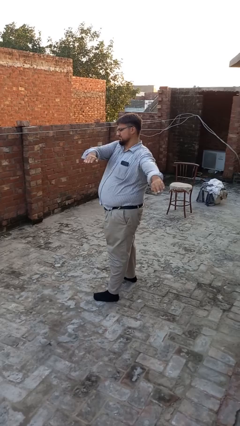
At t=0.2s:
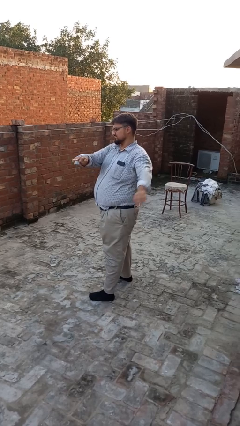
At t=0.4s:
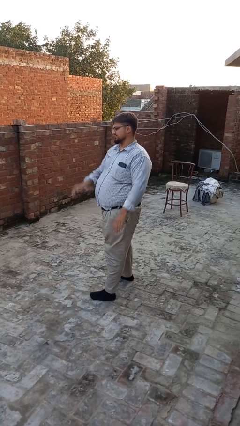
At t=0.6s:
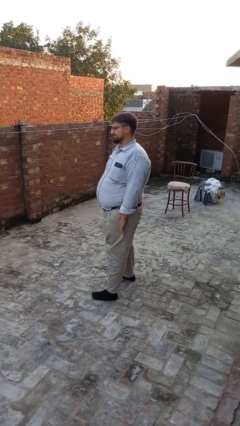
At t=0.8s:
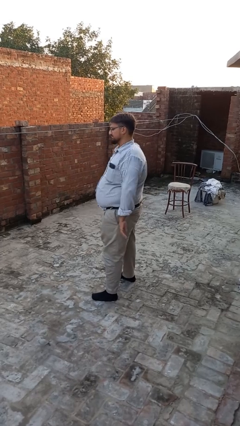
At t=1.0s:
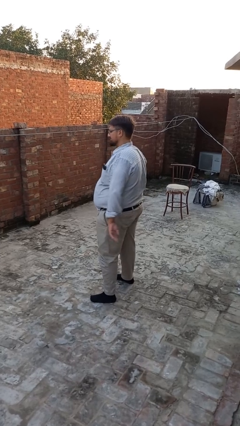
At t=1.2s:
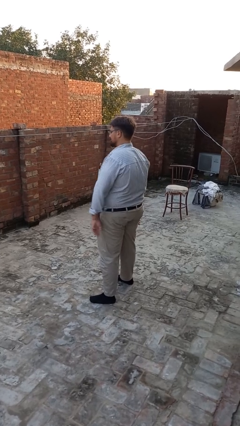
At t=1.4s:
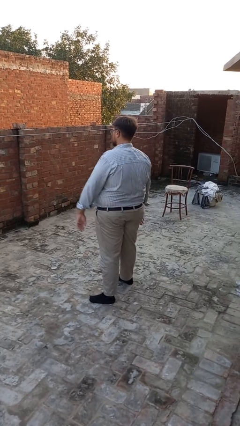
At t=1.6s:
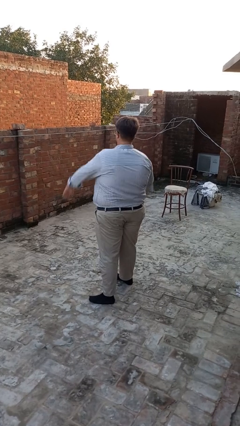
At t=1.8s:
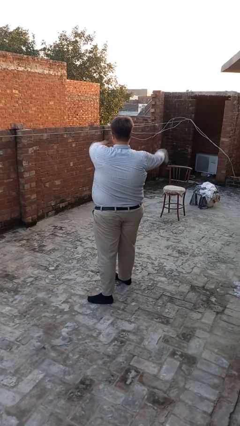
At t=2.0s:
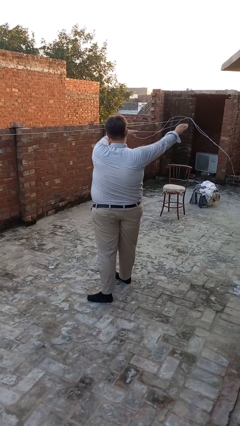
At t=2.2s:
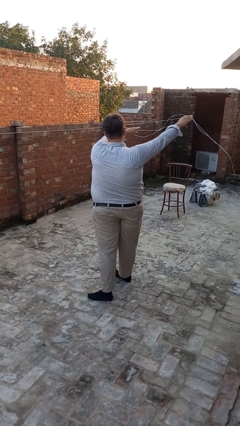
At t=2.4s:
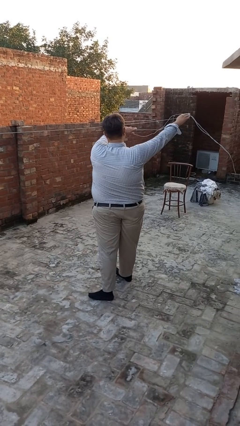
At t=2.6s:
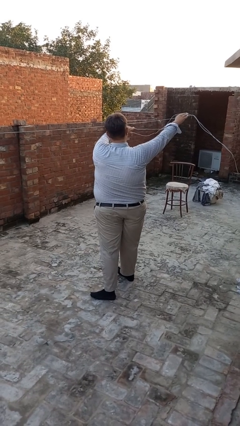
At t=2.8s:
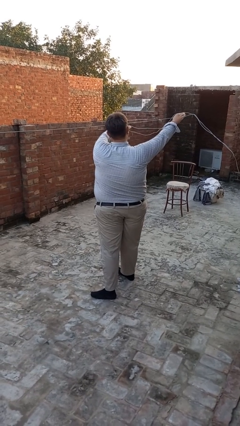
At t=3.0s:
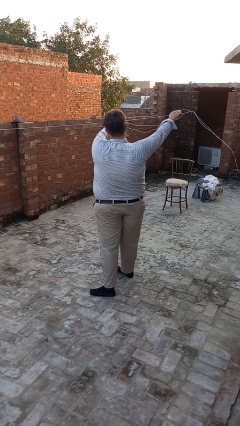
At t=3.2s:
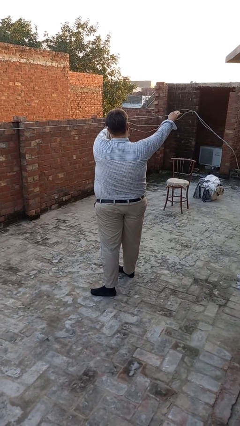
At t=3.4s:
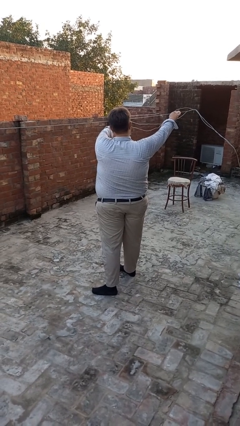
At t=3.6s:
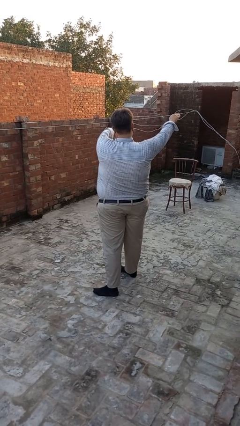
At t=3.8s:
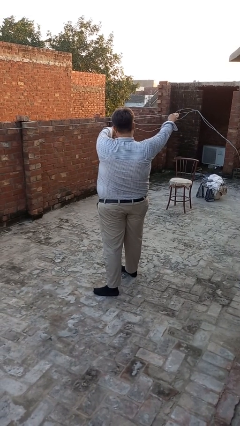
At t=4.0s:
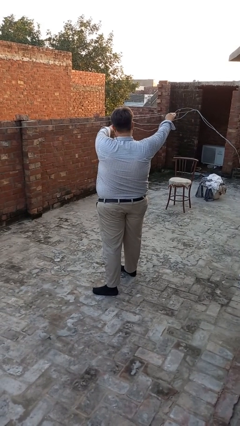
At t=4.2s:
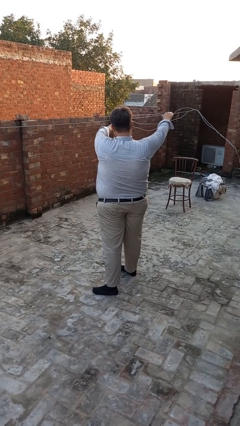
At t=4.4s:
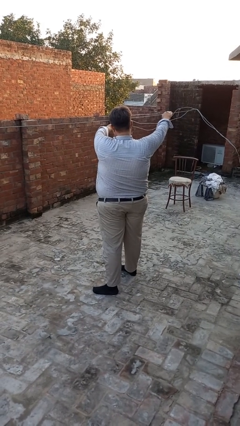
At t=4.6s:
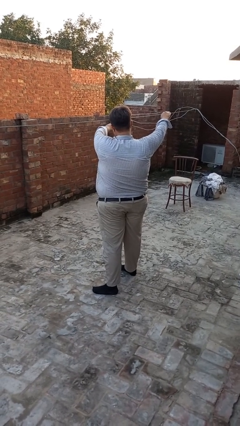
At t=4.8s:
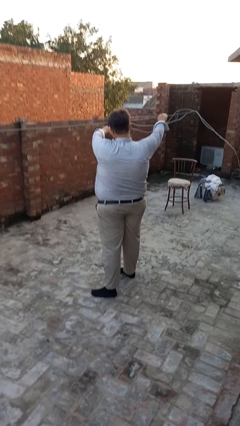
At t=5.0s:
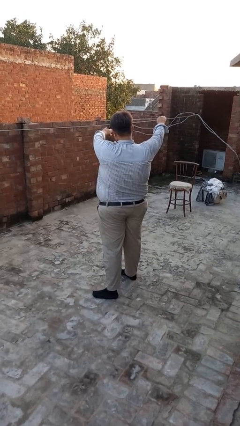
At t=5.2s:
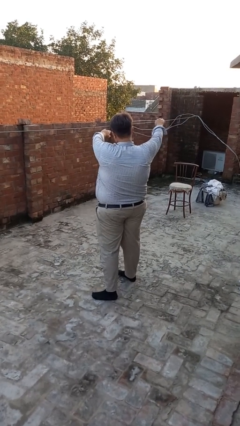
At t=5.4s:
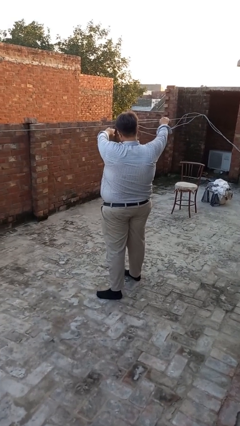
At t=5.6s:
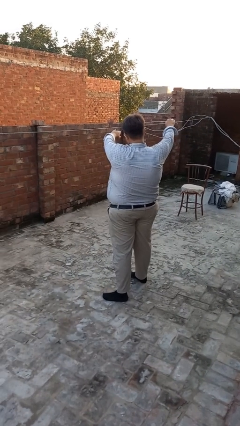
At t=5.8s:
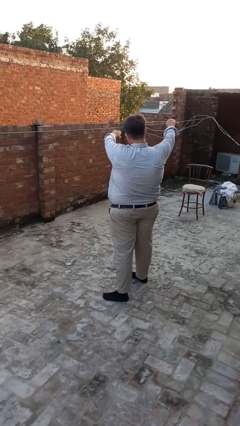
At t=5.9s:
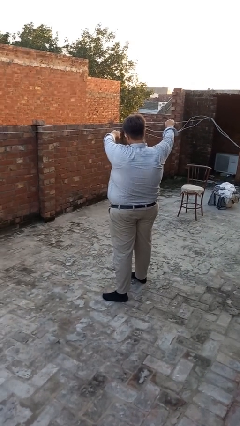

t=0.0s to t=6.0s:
person gestures swipe right

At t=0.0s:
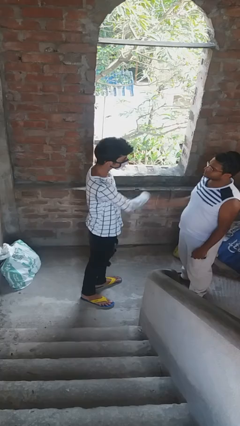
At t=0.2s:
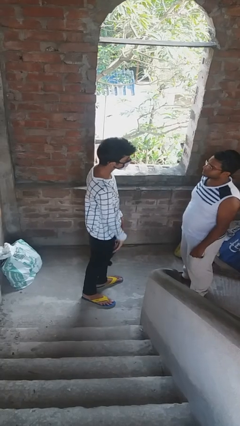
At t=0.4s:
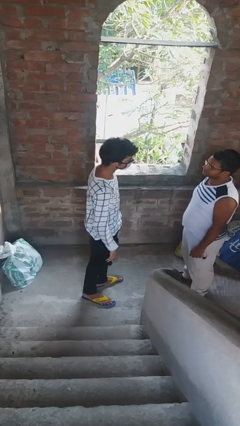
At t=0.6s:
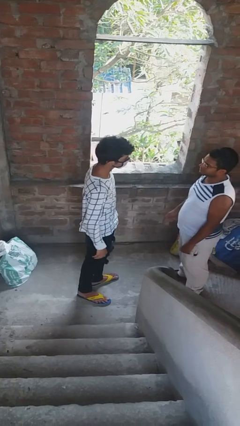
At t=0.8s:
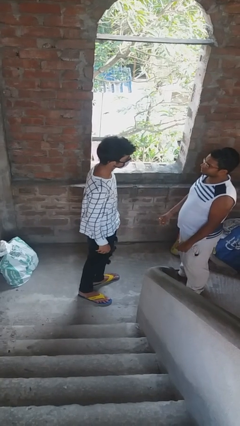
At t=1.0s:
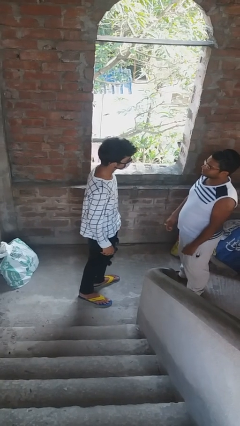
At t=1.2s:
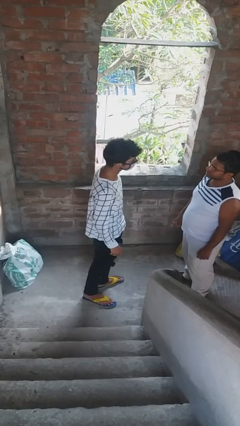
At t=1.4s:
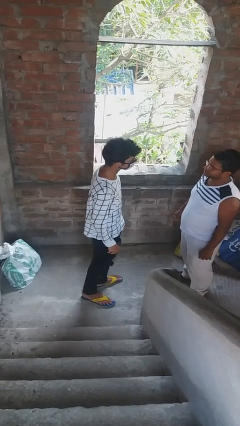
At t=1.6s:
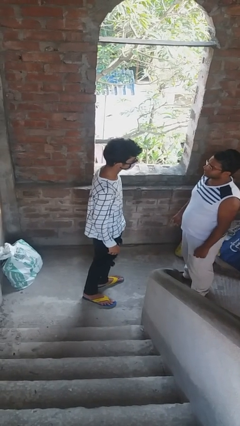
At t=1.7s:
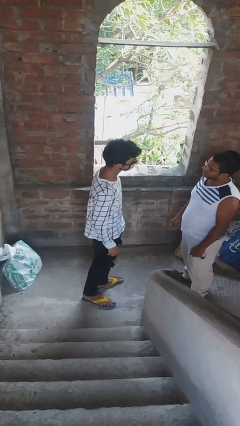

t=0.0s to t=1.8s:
person highfives hand

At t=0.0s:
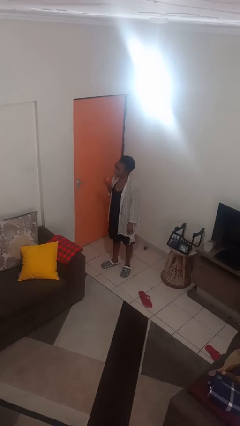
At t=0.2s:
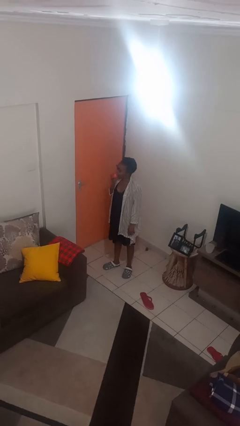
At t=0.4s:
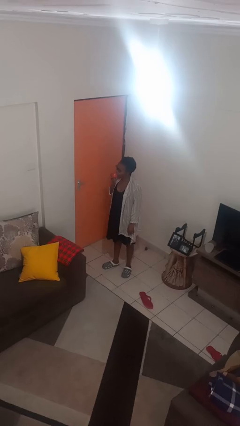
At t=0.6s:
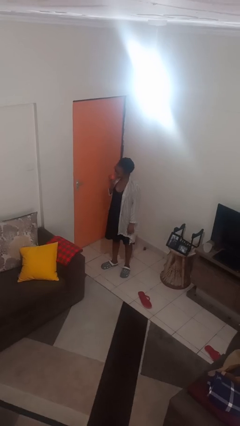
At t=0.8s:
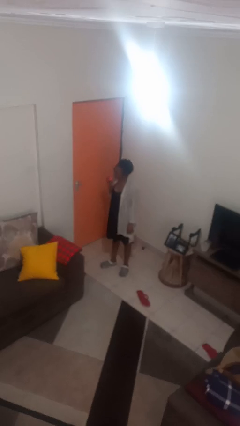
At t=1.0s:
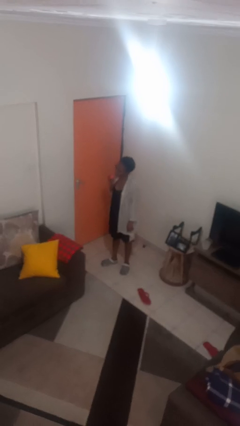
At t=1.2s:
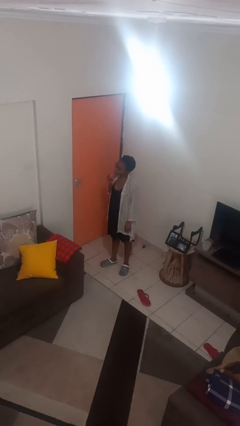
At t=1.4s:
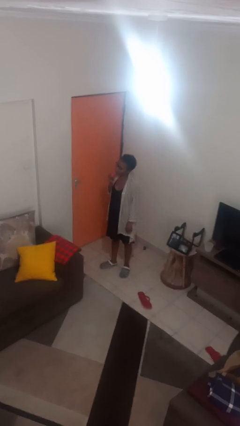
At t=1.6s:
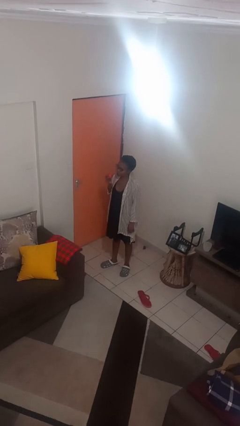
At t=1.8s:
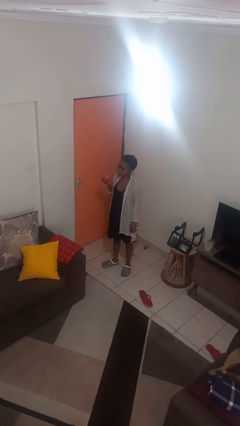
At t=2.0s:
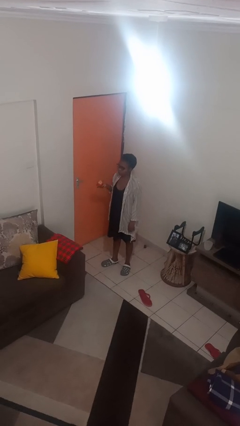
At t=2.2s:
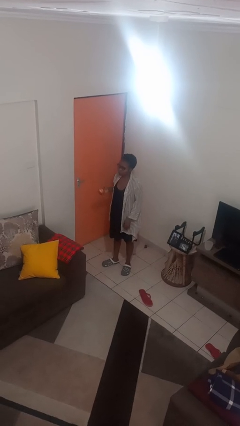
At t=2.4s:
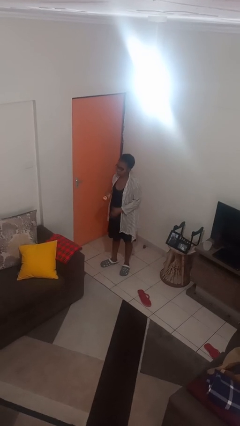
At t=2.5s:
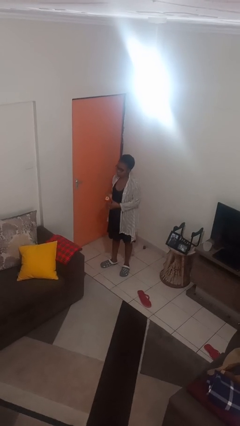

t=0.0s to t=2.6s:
person eats apple

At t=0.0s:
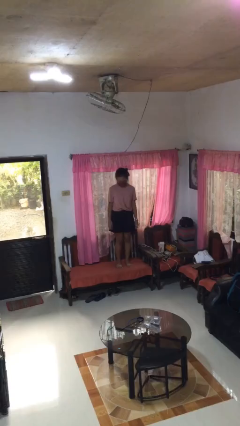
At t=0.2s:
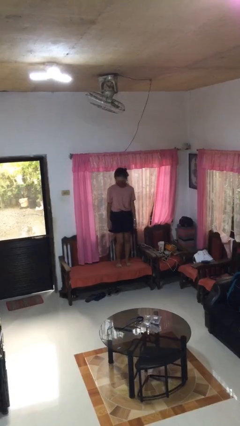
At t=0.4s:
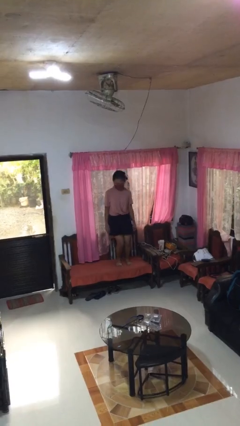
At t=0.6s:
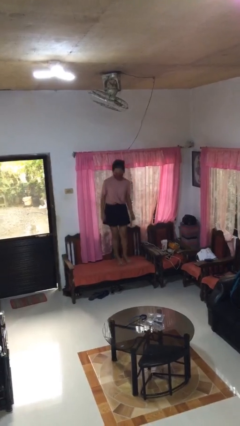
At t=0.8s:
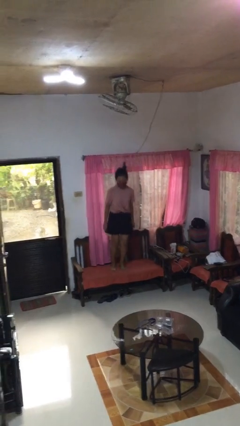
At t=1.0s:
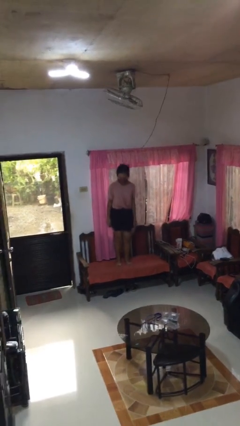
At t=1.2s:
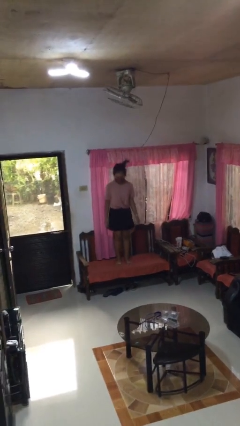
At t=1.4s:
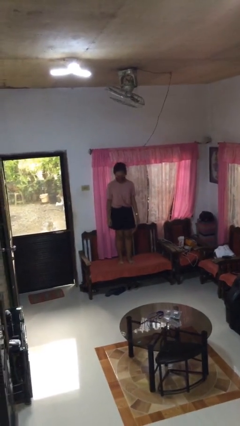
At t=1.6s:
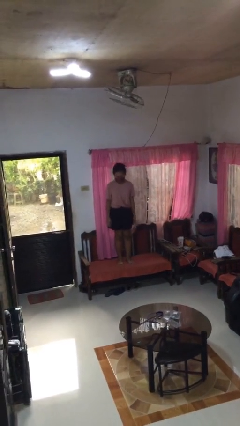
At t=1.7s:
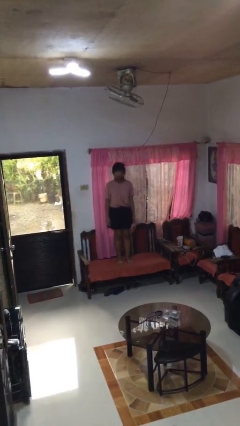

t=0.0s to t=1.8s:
person jumps on couch

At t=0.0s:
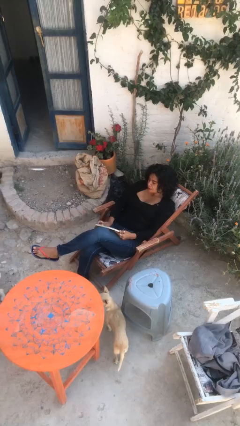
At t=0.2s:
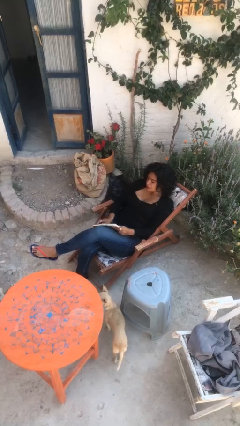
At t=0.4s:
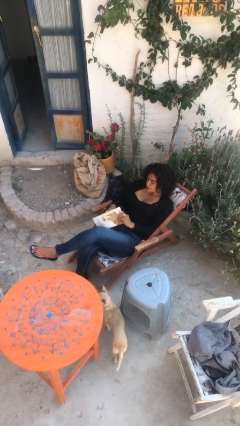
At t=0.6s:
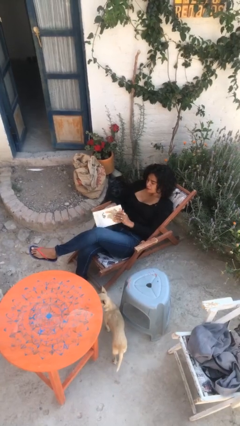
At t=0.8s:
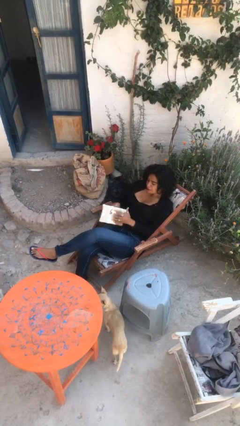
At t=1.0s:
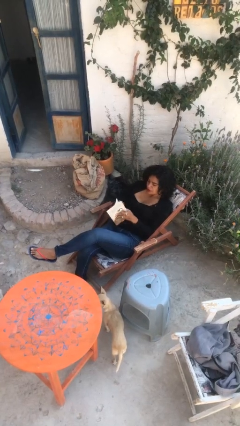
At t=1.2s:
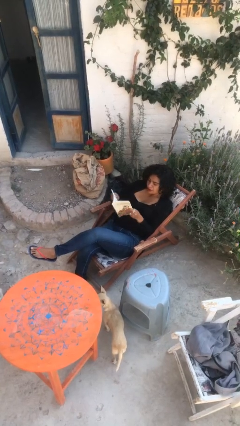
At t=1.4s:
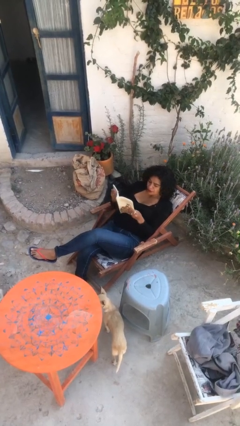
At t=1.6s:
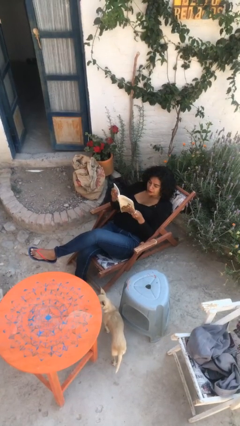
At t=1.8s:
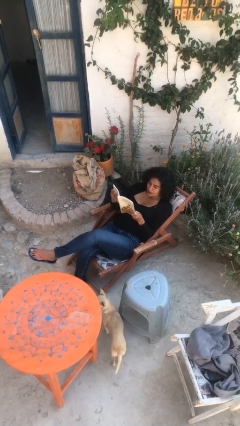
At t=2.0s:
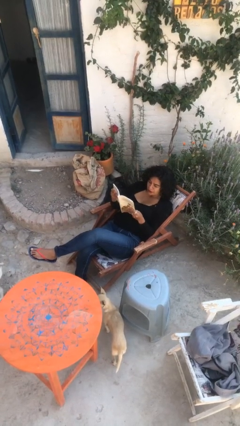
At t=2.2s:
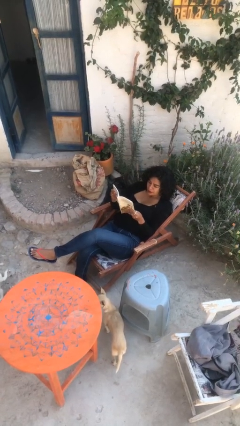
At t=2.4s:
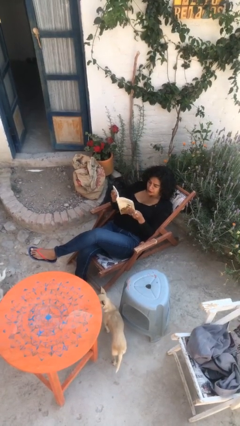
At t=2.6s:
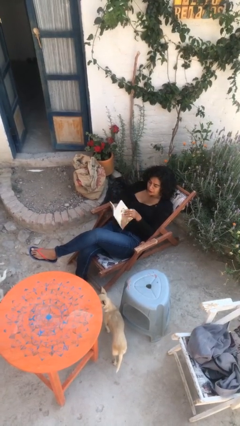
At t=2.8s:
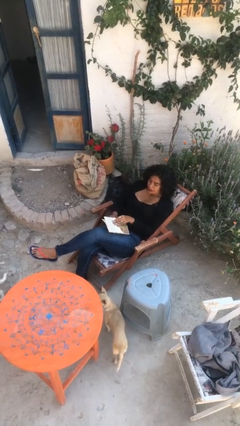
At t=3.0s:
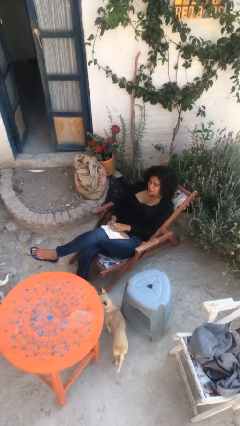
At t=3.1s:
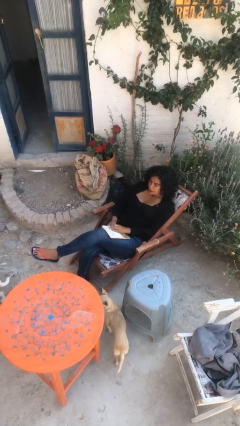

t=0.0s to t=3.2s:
person reads document

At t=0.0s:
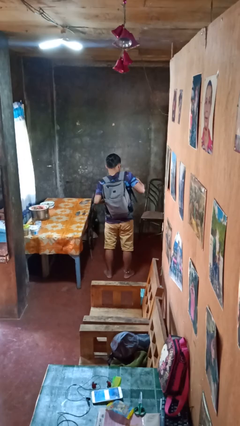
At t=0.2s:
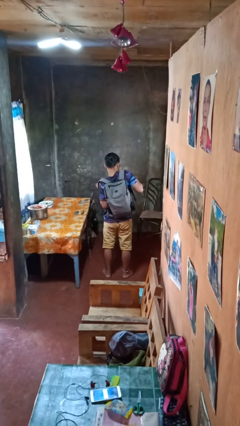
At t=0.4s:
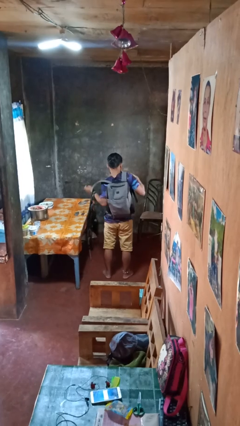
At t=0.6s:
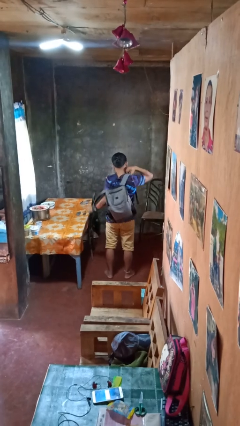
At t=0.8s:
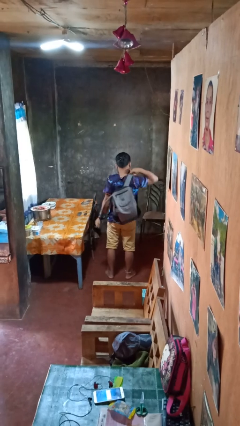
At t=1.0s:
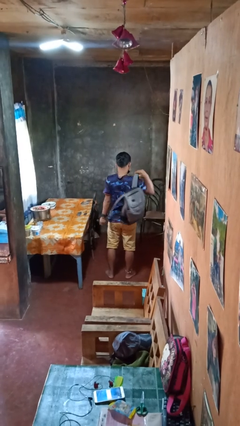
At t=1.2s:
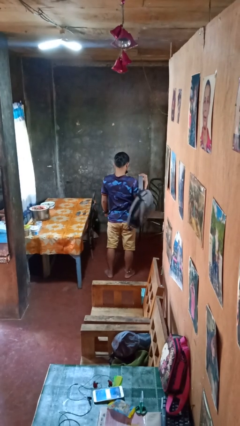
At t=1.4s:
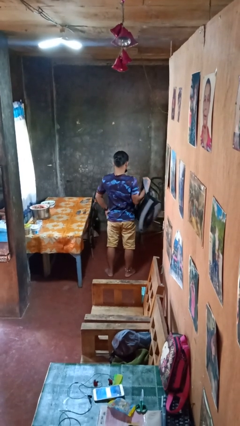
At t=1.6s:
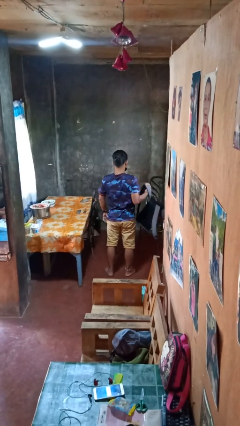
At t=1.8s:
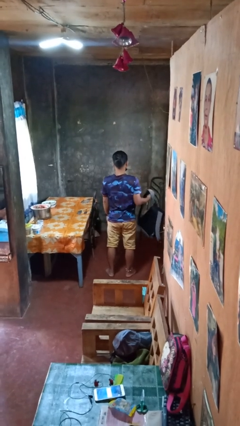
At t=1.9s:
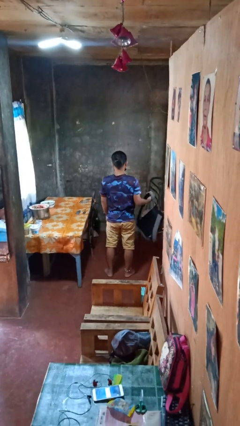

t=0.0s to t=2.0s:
person takes off backpack
